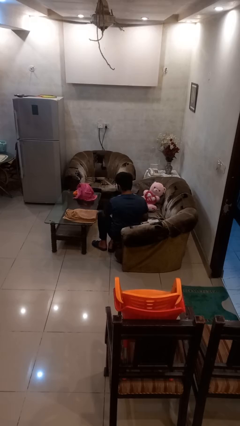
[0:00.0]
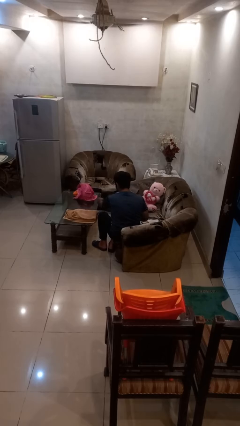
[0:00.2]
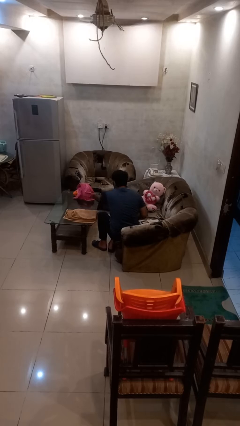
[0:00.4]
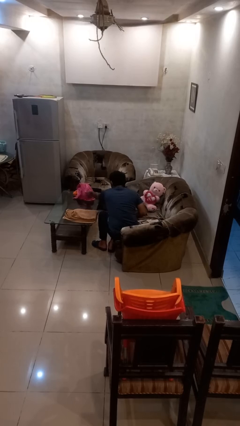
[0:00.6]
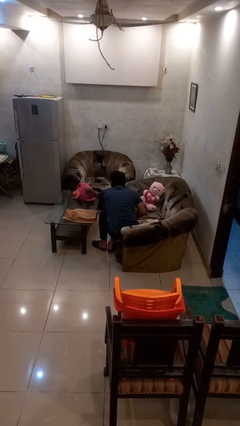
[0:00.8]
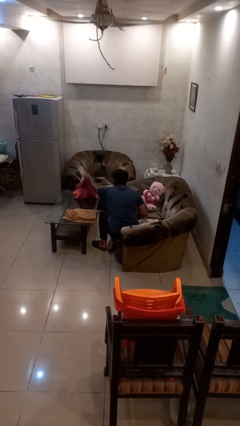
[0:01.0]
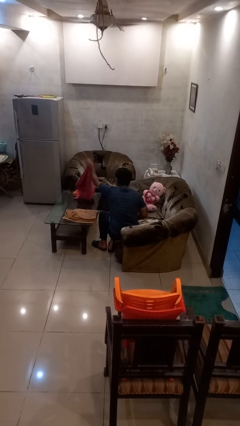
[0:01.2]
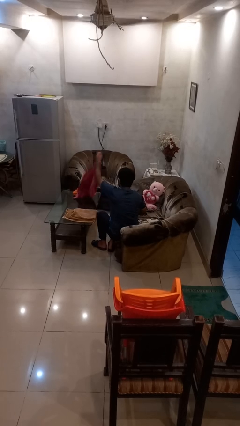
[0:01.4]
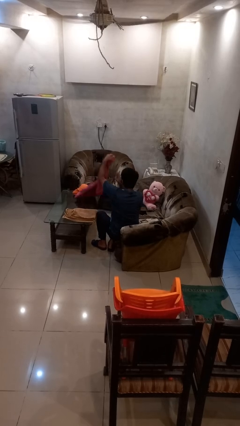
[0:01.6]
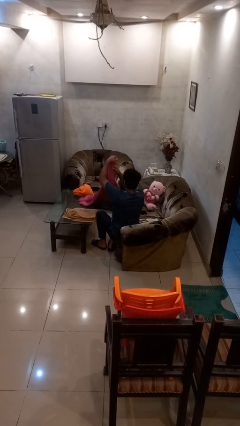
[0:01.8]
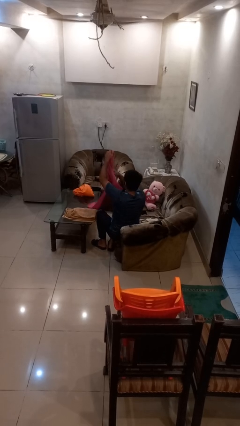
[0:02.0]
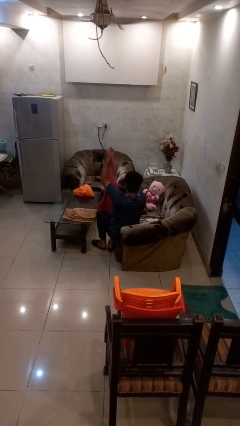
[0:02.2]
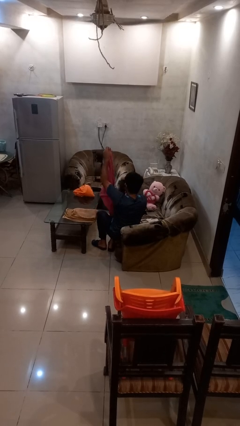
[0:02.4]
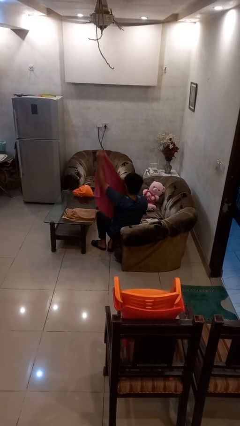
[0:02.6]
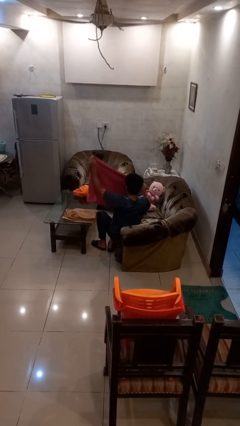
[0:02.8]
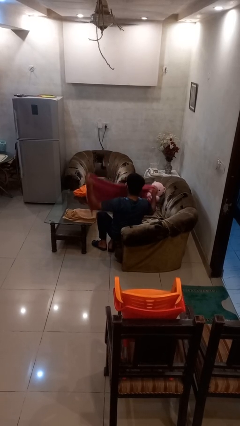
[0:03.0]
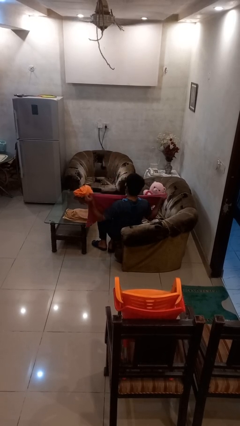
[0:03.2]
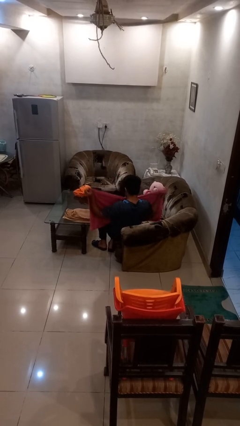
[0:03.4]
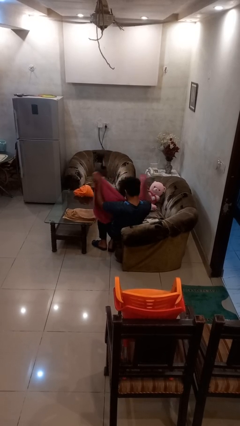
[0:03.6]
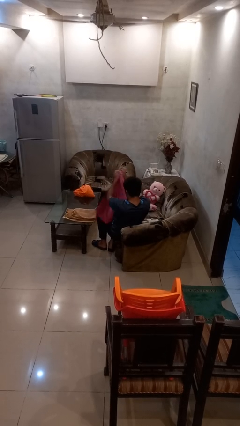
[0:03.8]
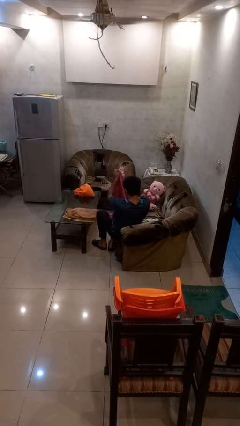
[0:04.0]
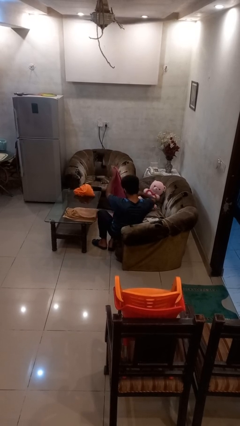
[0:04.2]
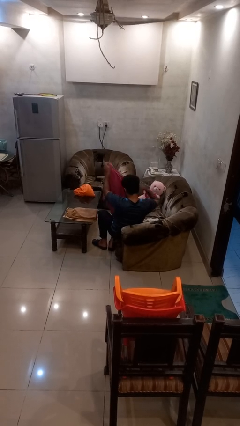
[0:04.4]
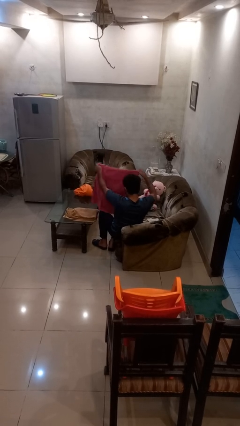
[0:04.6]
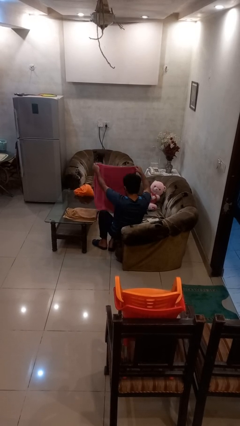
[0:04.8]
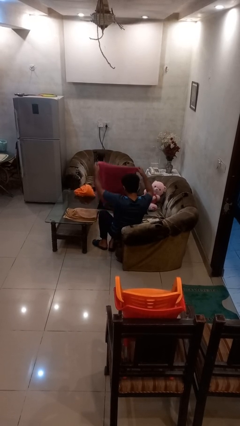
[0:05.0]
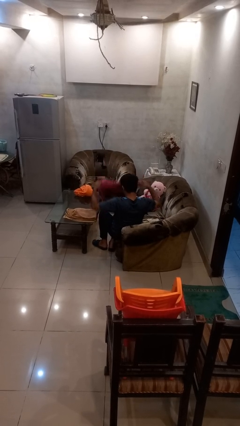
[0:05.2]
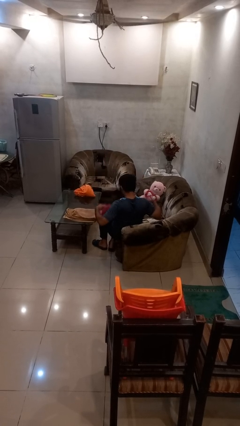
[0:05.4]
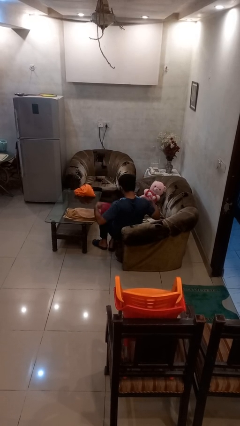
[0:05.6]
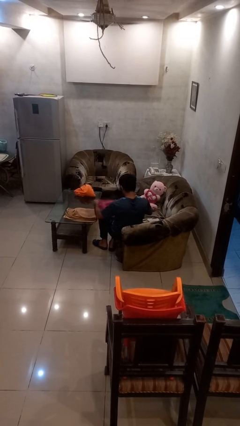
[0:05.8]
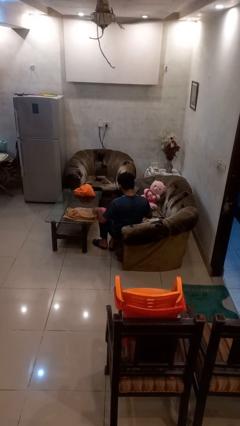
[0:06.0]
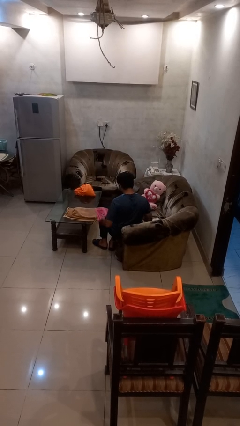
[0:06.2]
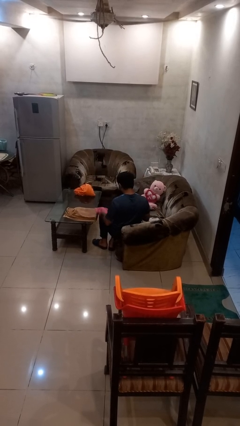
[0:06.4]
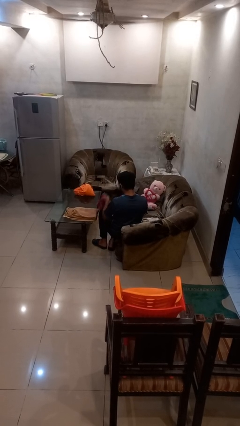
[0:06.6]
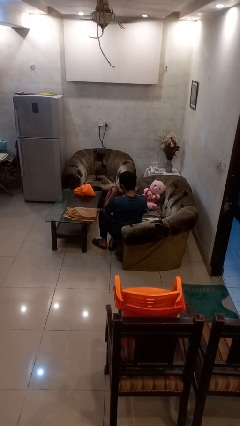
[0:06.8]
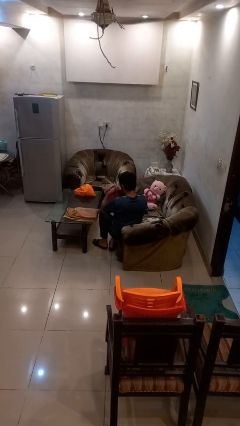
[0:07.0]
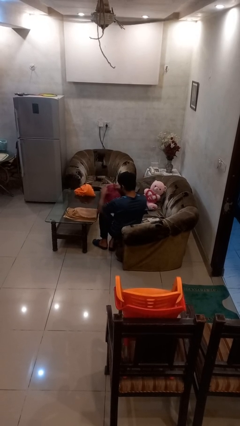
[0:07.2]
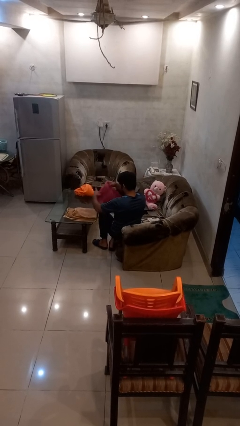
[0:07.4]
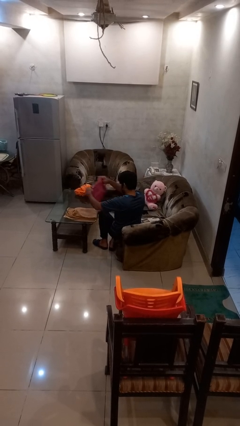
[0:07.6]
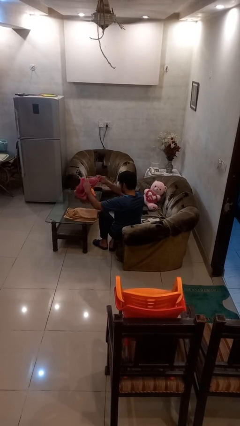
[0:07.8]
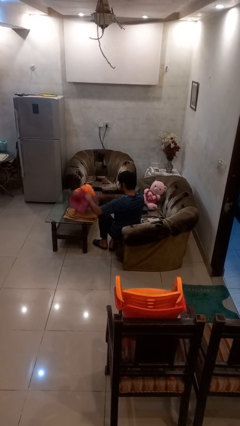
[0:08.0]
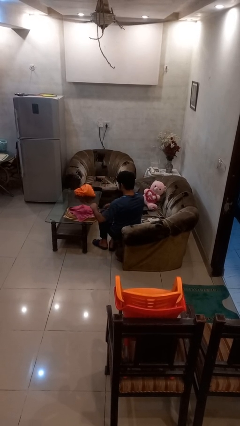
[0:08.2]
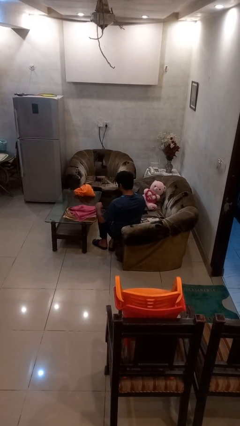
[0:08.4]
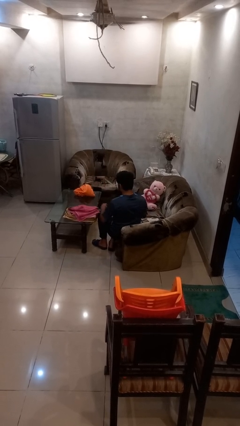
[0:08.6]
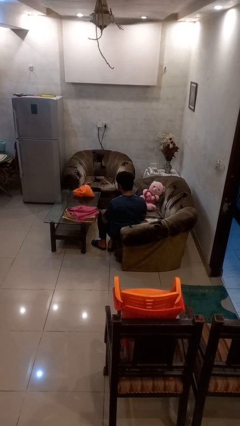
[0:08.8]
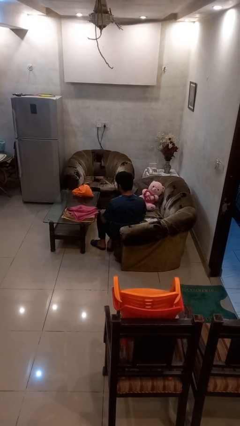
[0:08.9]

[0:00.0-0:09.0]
person folds towel

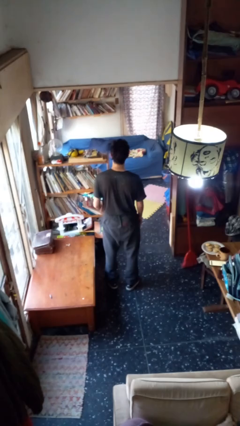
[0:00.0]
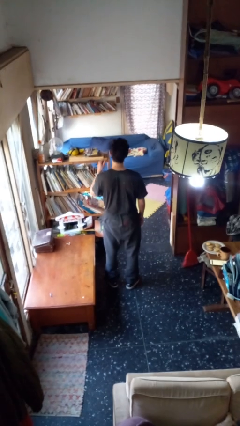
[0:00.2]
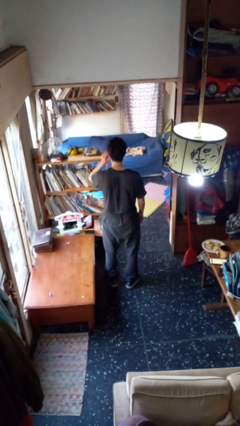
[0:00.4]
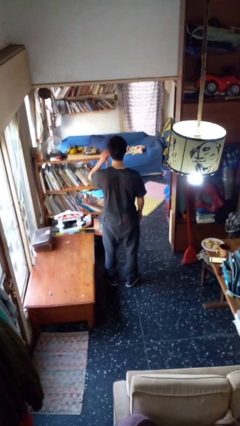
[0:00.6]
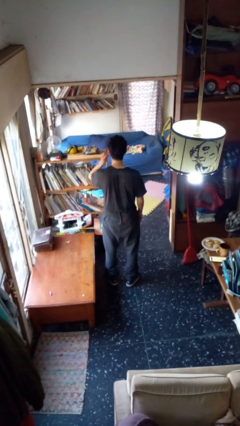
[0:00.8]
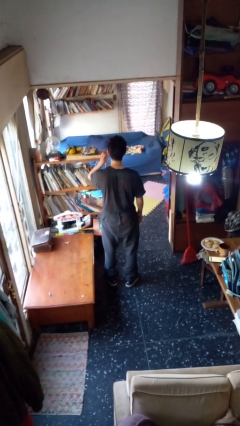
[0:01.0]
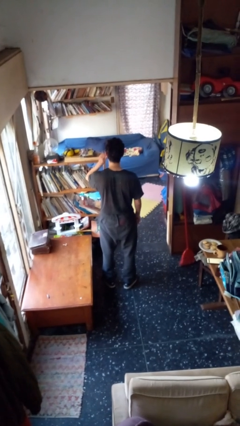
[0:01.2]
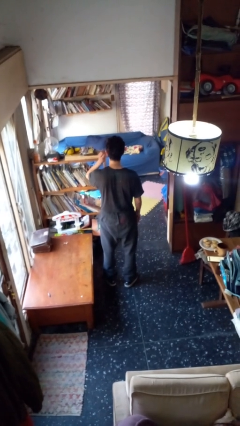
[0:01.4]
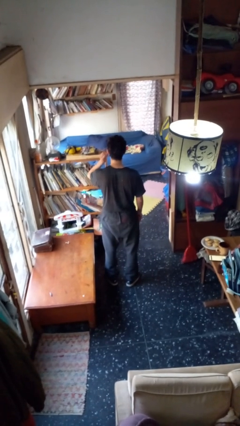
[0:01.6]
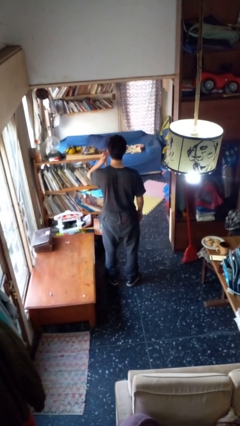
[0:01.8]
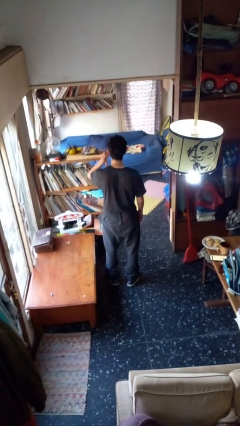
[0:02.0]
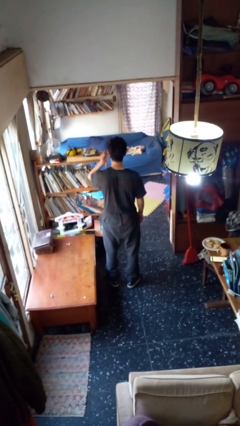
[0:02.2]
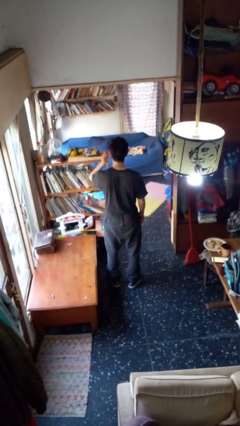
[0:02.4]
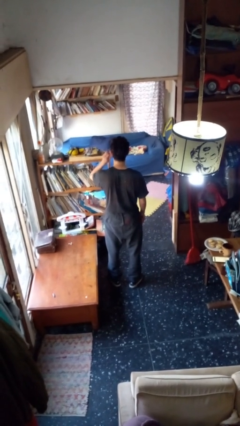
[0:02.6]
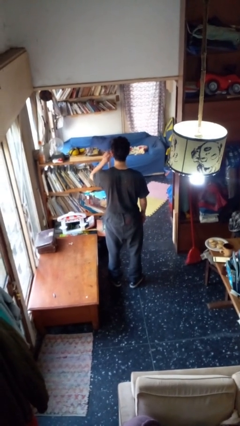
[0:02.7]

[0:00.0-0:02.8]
person touches earlobe

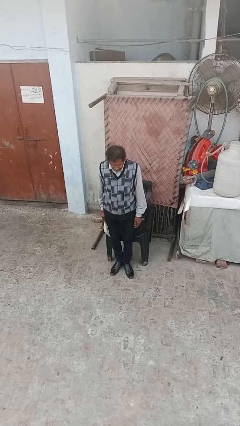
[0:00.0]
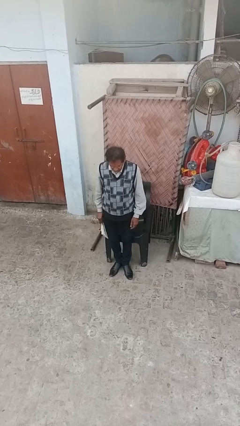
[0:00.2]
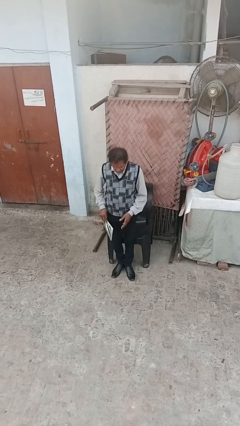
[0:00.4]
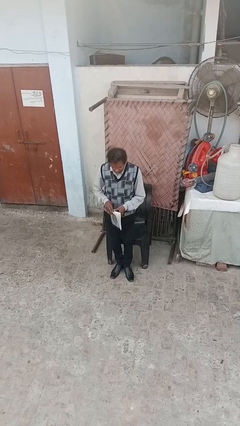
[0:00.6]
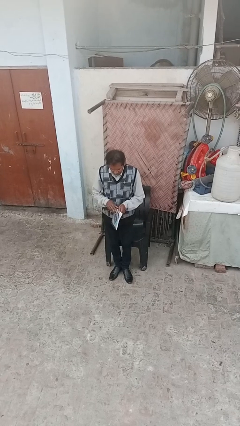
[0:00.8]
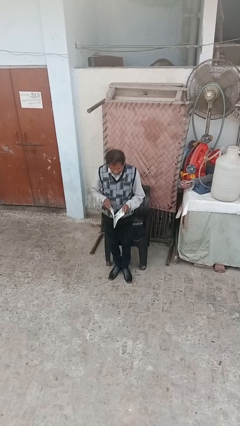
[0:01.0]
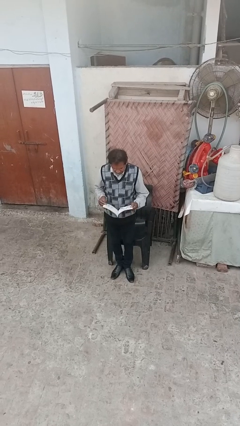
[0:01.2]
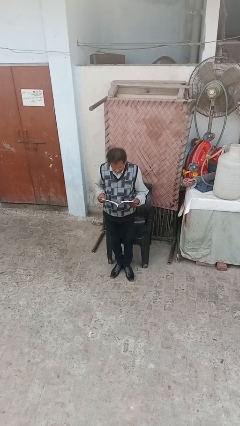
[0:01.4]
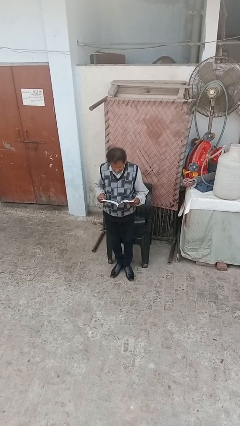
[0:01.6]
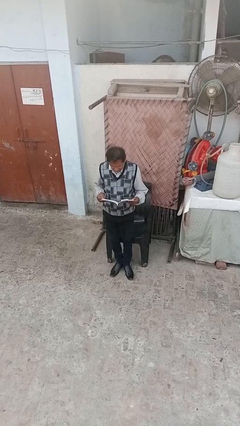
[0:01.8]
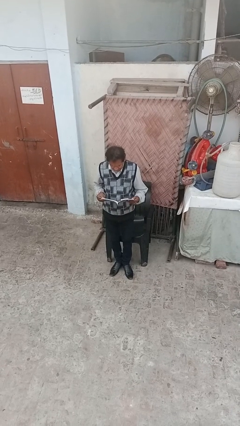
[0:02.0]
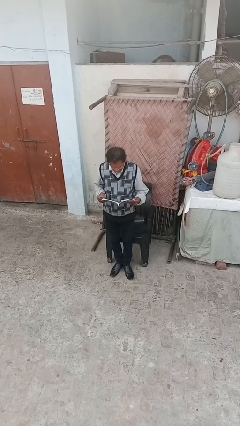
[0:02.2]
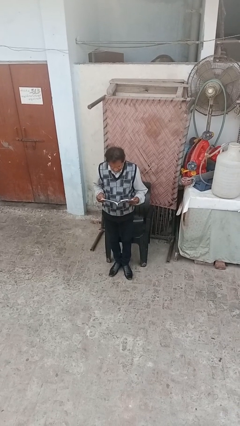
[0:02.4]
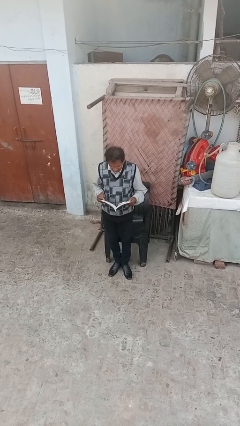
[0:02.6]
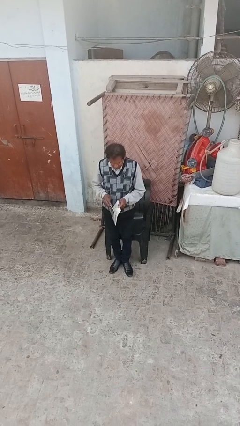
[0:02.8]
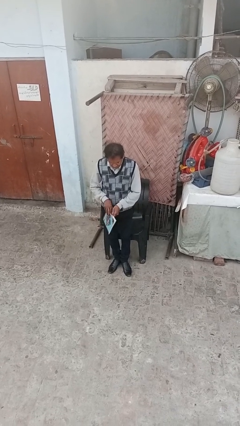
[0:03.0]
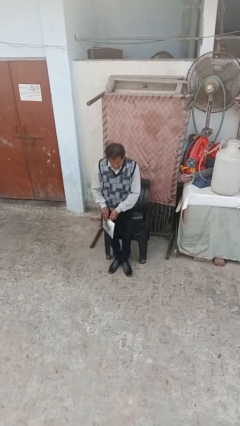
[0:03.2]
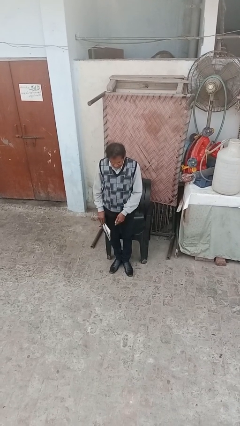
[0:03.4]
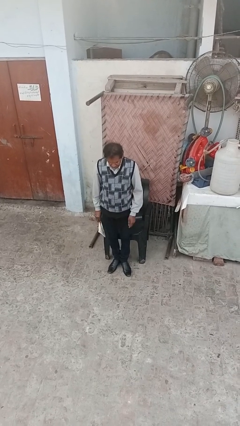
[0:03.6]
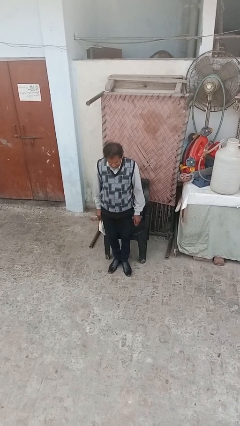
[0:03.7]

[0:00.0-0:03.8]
person reads document

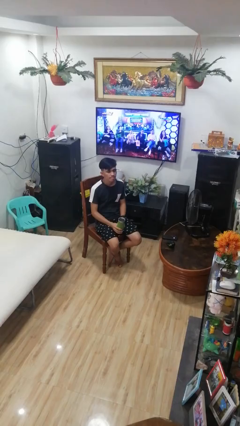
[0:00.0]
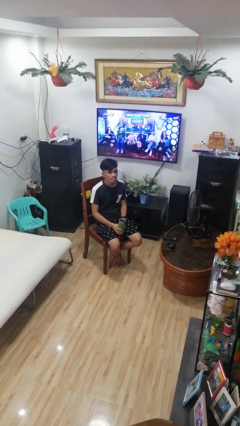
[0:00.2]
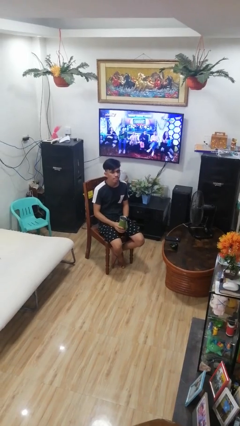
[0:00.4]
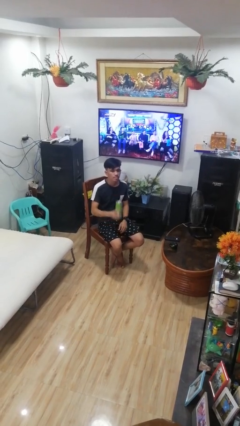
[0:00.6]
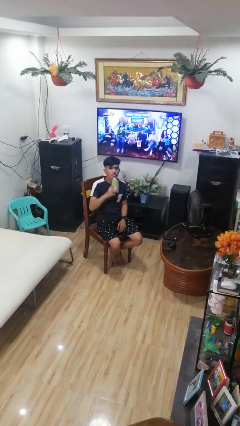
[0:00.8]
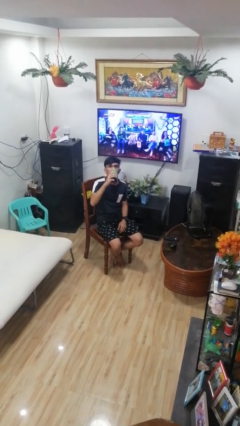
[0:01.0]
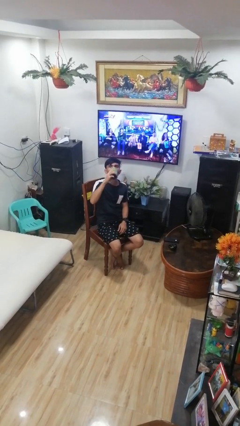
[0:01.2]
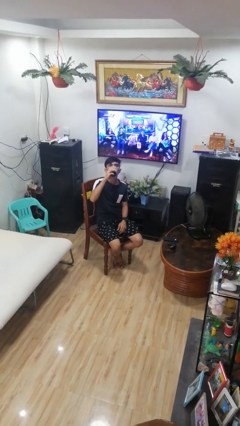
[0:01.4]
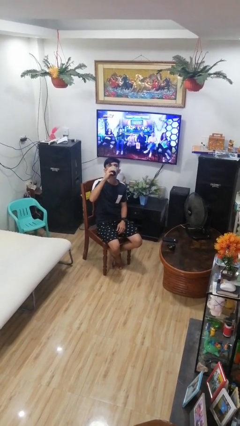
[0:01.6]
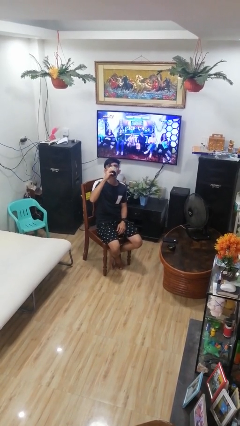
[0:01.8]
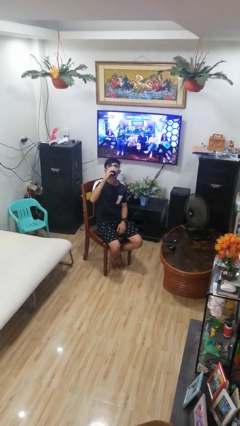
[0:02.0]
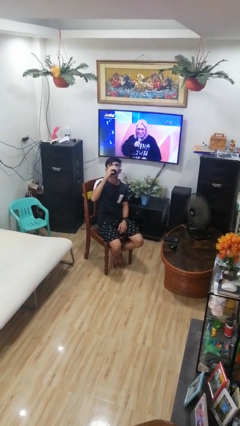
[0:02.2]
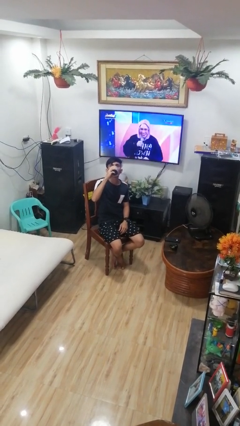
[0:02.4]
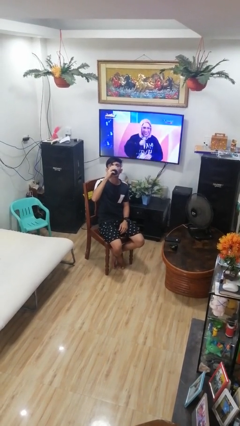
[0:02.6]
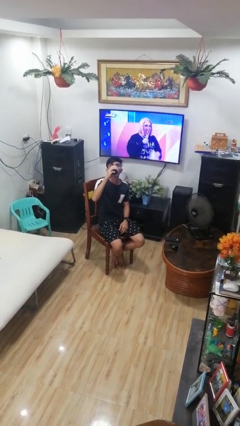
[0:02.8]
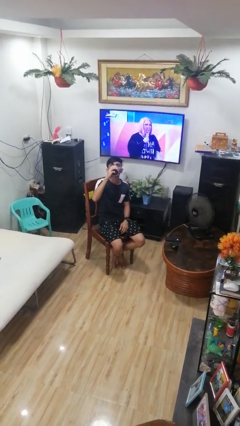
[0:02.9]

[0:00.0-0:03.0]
person drinks from bottle
